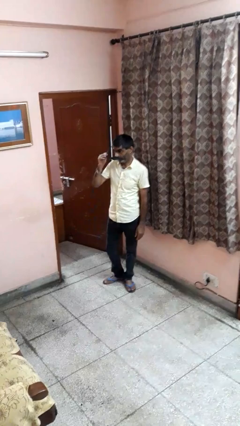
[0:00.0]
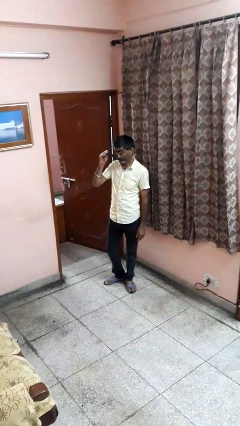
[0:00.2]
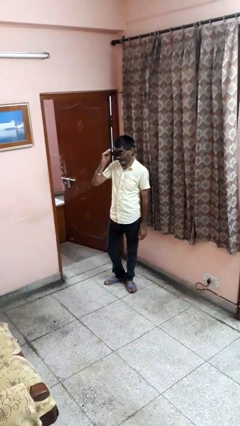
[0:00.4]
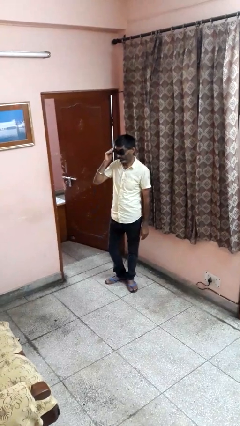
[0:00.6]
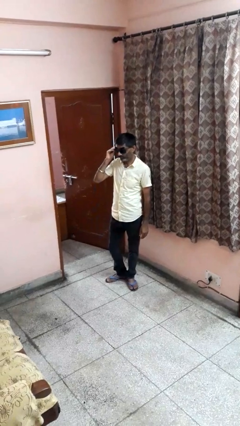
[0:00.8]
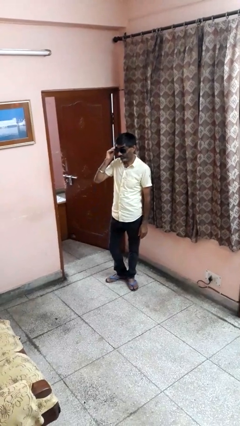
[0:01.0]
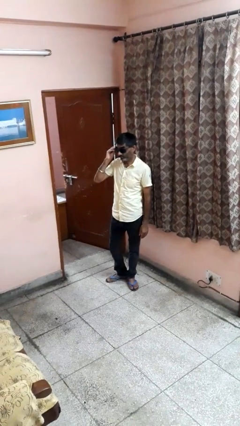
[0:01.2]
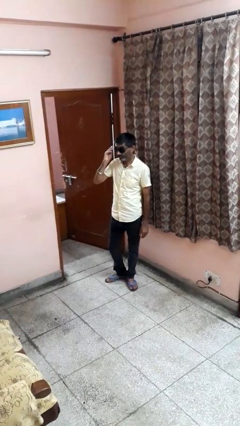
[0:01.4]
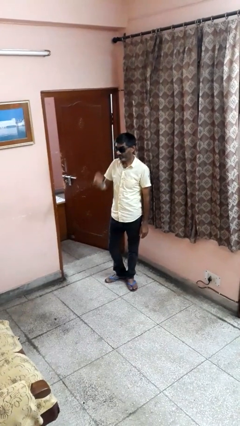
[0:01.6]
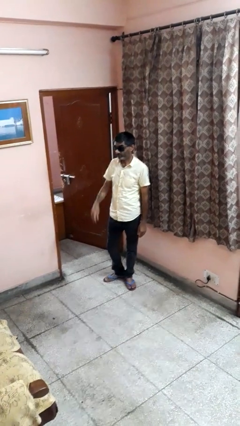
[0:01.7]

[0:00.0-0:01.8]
person puts on sunglasses

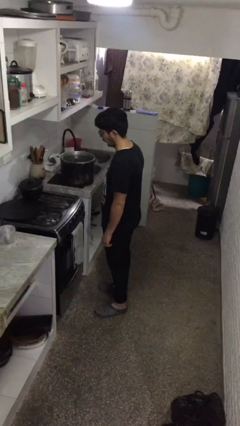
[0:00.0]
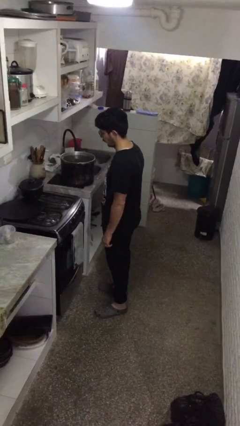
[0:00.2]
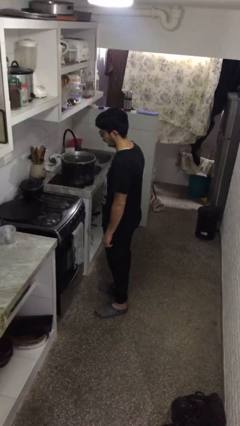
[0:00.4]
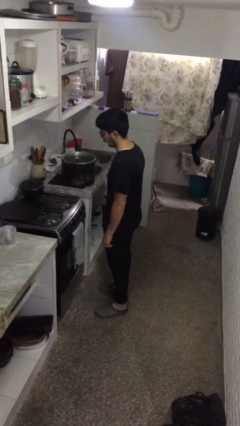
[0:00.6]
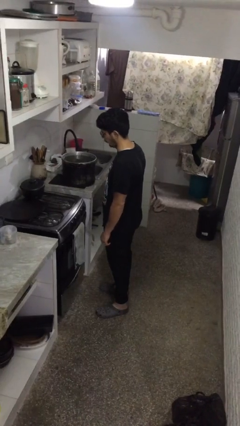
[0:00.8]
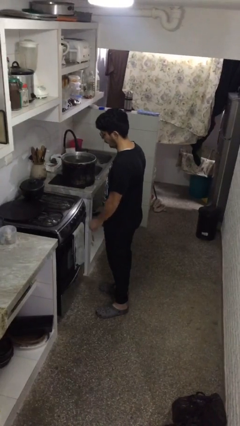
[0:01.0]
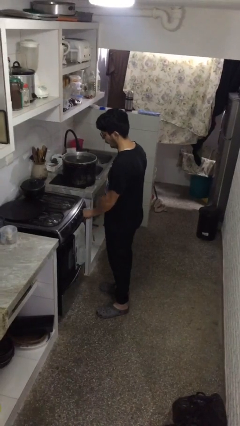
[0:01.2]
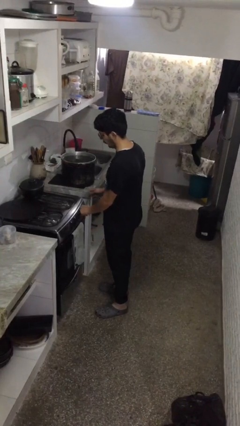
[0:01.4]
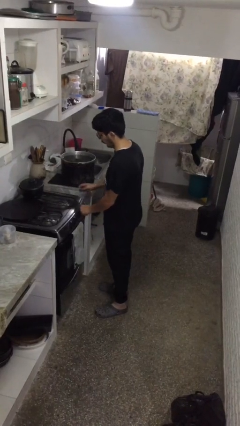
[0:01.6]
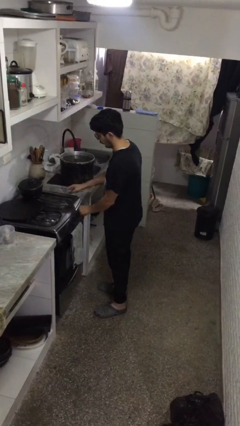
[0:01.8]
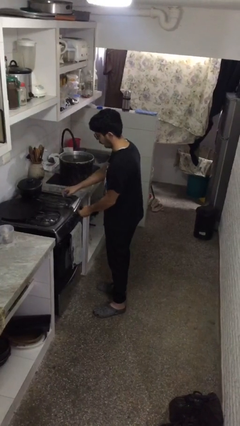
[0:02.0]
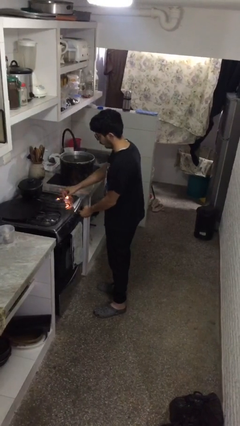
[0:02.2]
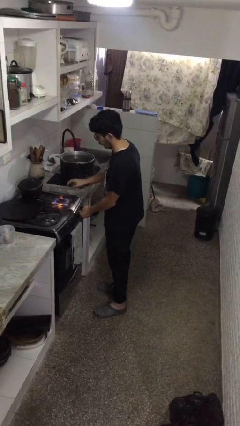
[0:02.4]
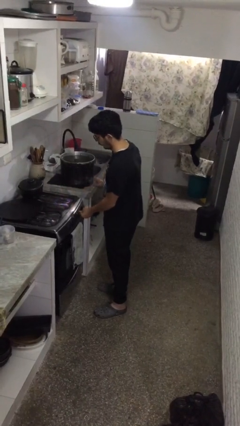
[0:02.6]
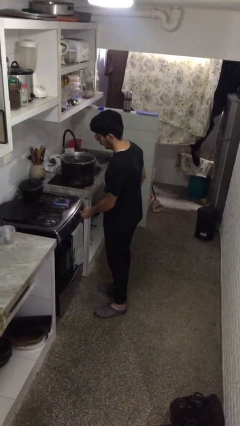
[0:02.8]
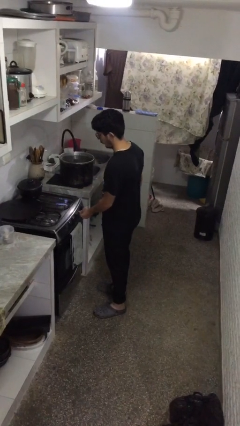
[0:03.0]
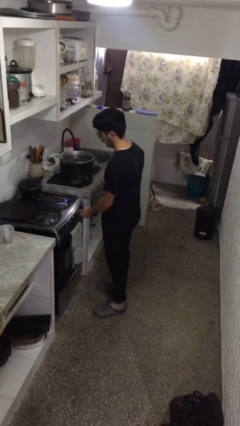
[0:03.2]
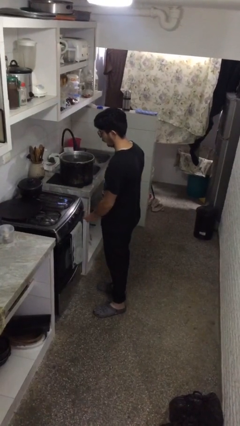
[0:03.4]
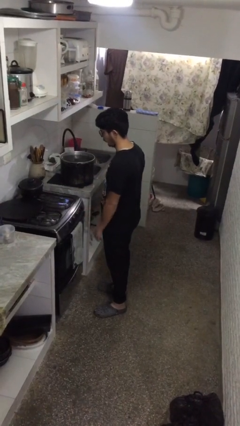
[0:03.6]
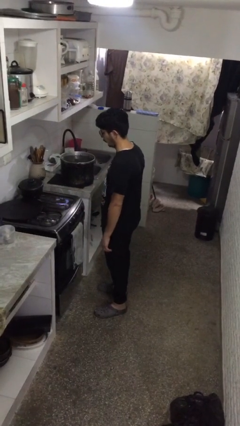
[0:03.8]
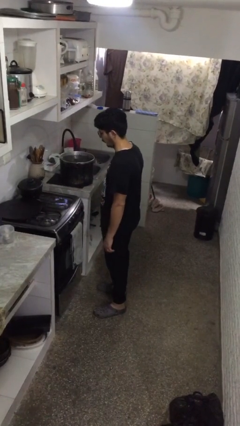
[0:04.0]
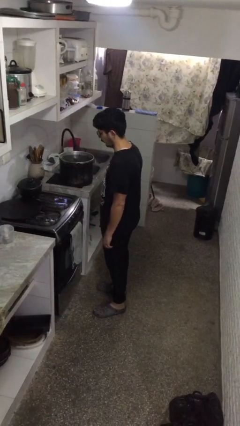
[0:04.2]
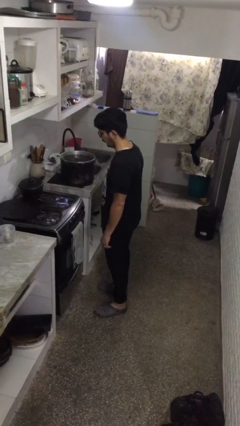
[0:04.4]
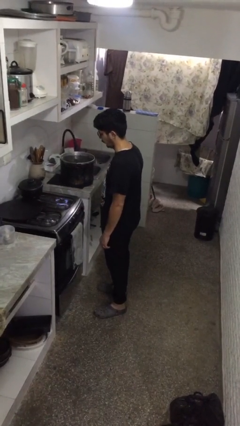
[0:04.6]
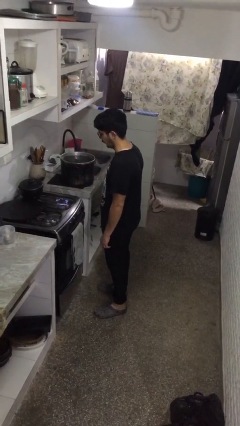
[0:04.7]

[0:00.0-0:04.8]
person turns on stovetop

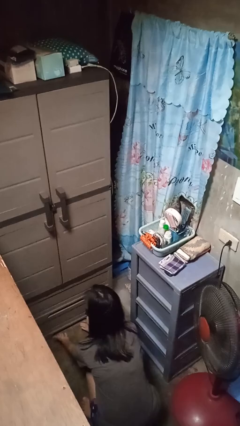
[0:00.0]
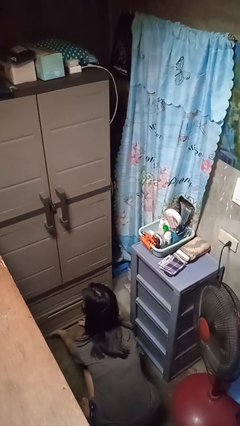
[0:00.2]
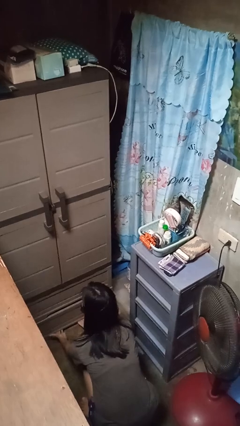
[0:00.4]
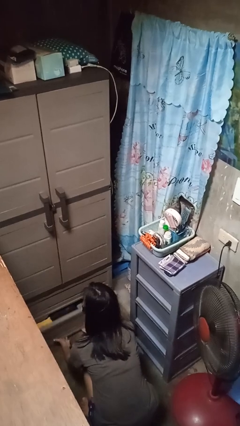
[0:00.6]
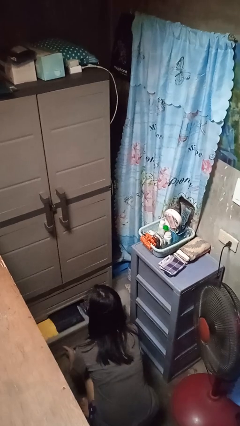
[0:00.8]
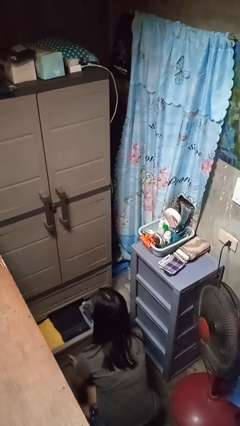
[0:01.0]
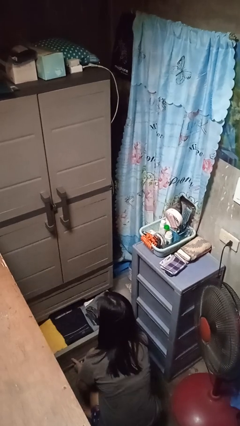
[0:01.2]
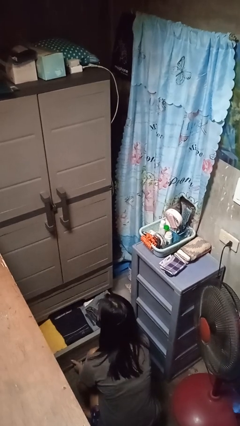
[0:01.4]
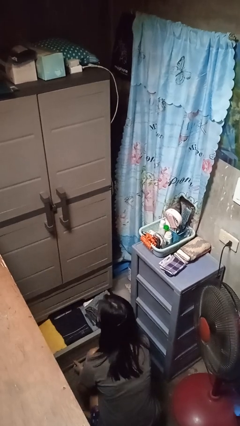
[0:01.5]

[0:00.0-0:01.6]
person opens dresser drawer

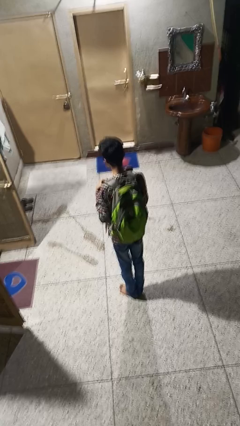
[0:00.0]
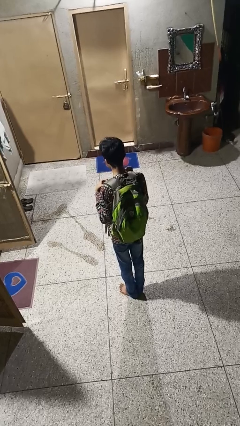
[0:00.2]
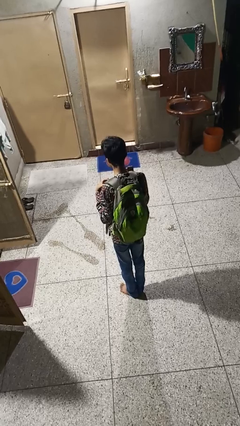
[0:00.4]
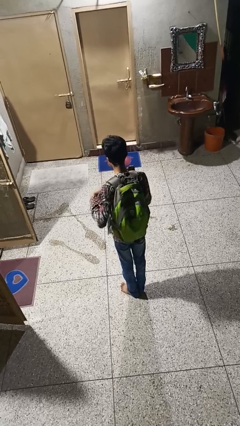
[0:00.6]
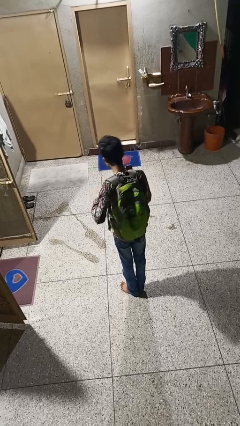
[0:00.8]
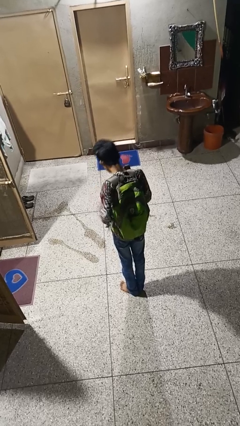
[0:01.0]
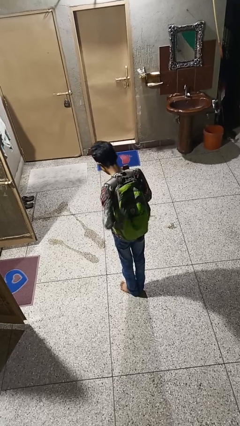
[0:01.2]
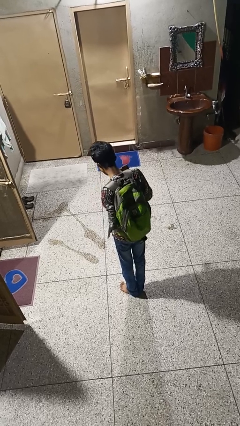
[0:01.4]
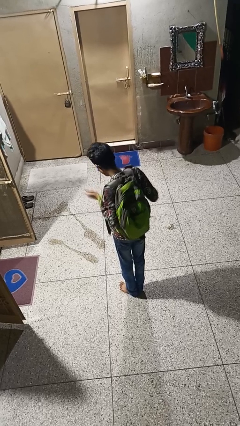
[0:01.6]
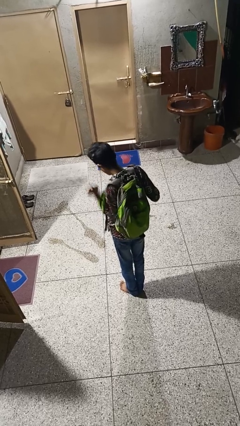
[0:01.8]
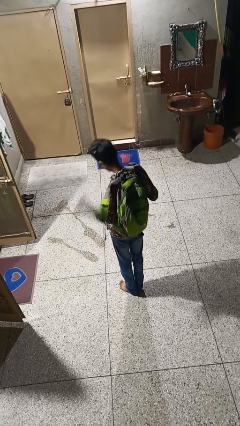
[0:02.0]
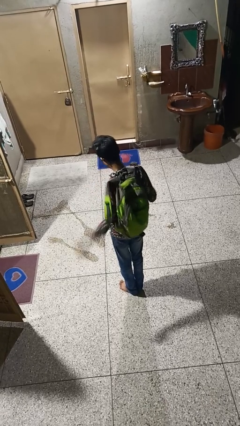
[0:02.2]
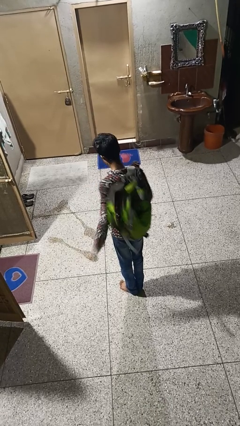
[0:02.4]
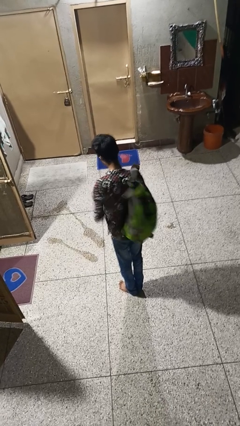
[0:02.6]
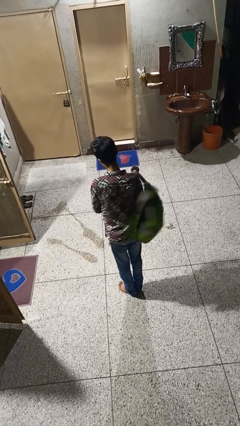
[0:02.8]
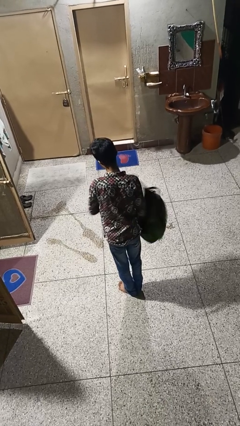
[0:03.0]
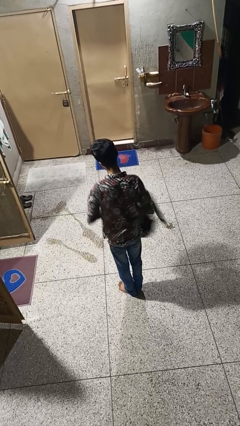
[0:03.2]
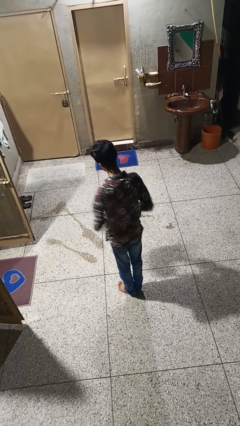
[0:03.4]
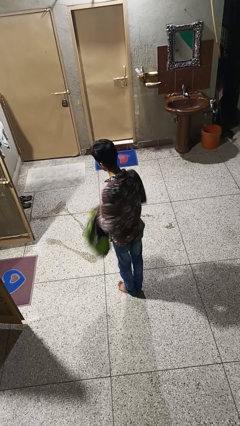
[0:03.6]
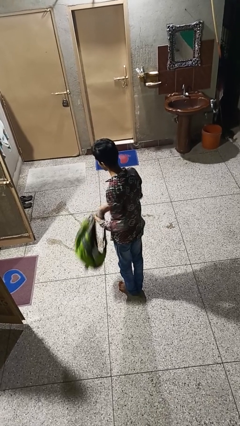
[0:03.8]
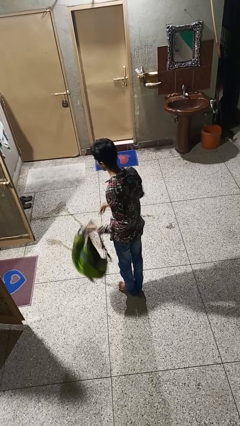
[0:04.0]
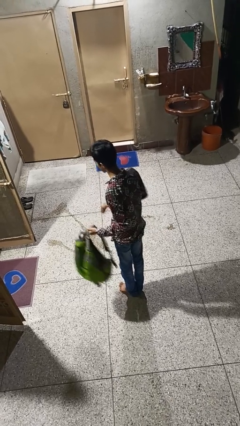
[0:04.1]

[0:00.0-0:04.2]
person takes off backpack

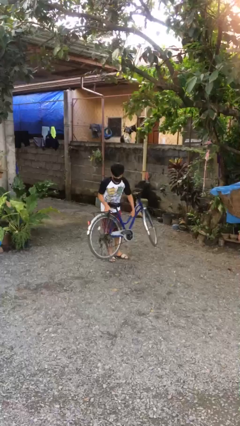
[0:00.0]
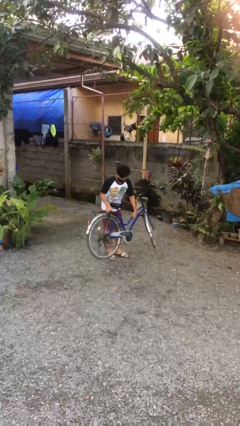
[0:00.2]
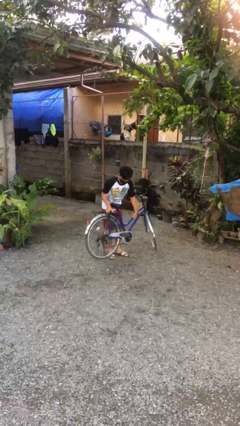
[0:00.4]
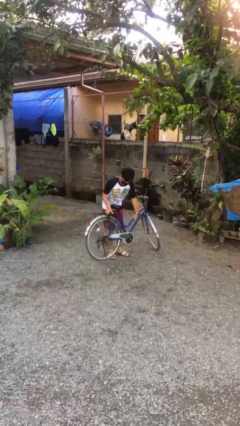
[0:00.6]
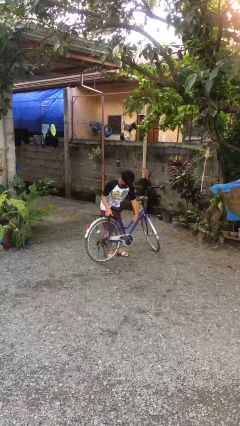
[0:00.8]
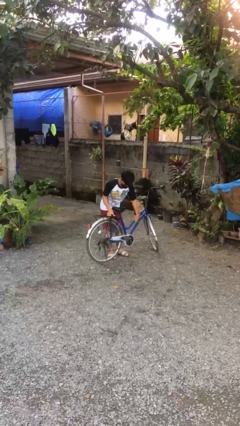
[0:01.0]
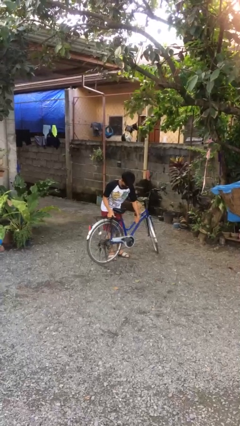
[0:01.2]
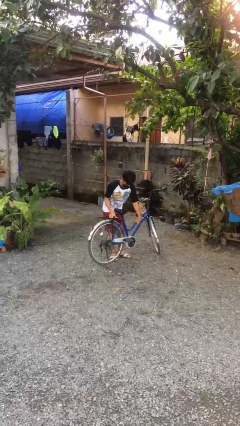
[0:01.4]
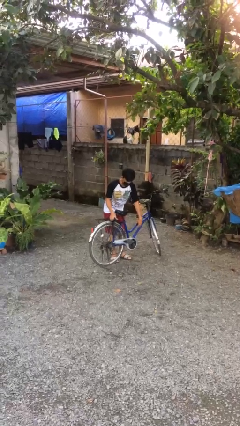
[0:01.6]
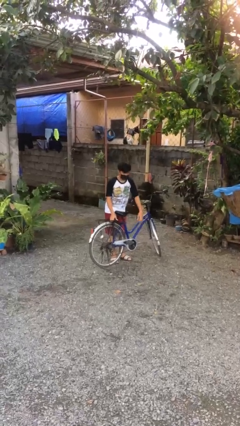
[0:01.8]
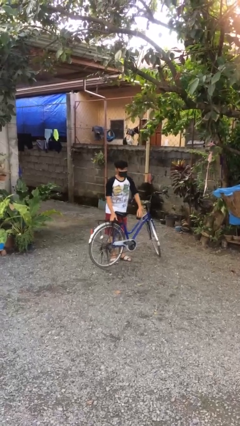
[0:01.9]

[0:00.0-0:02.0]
person puts down object on floor

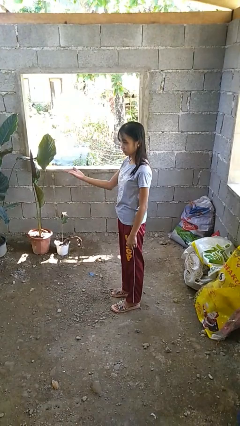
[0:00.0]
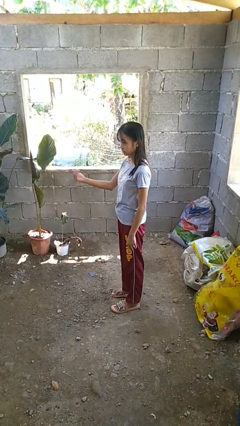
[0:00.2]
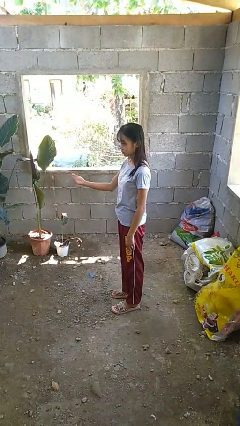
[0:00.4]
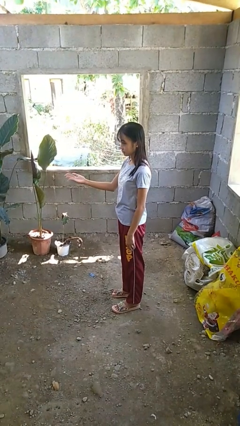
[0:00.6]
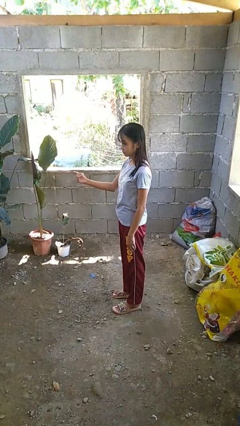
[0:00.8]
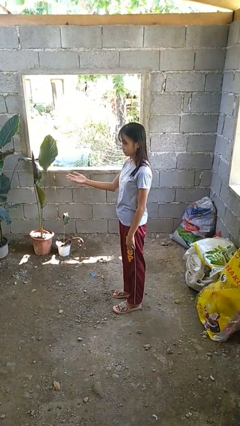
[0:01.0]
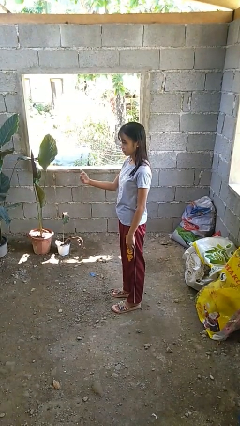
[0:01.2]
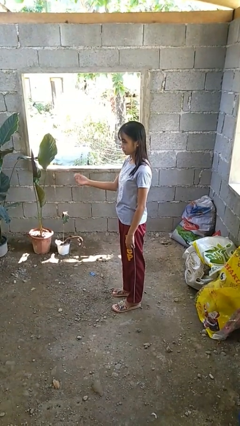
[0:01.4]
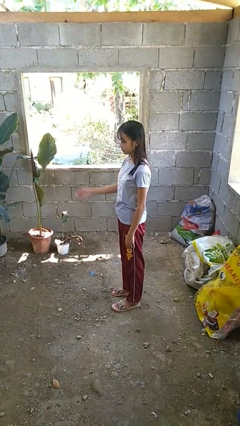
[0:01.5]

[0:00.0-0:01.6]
person gestures come here

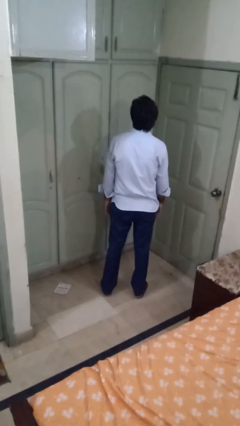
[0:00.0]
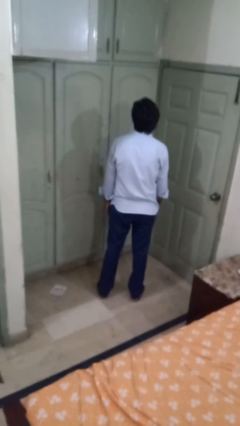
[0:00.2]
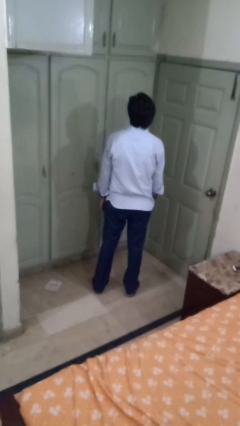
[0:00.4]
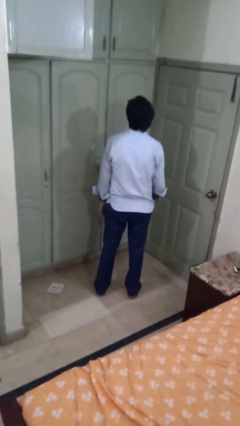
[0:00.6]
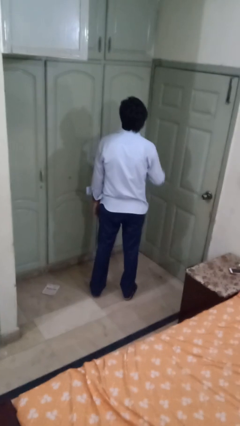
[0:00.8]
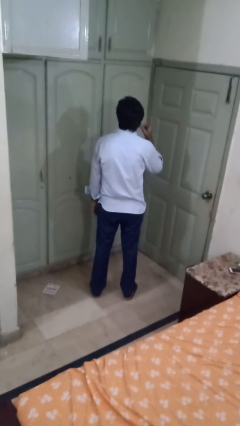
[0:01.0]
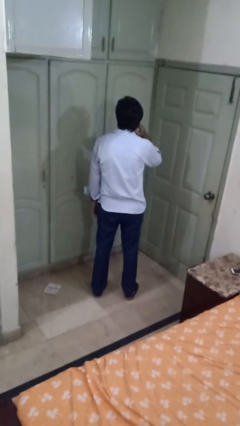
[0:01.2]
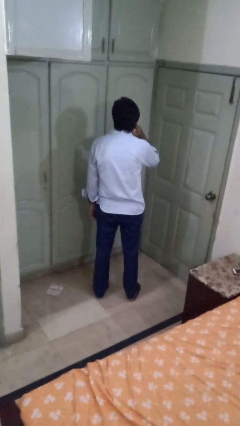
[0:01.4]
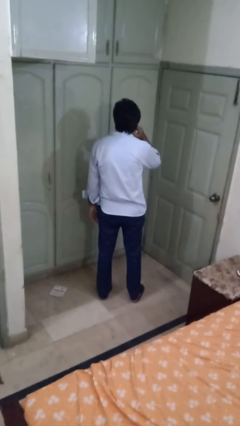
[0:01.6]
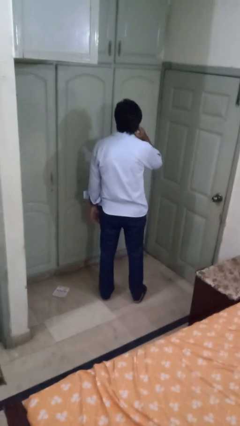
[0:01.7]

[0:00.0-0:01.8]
person gestures listen closely
